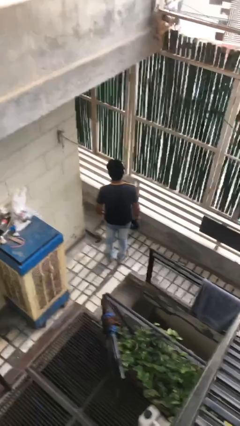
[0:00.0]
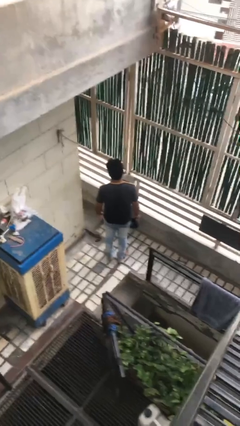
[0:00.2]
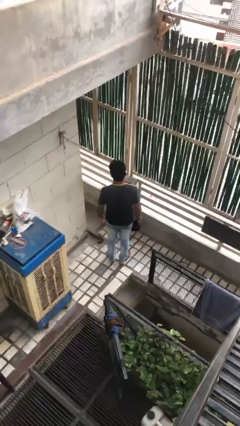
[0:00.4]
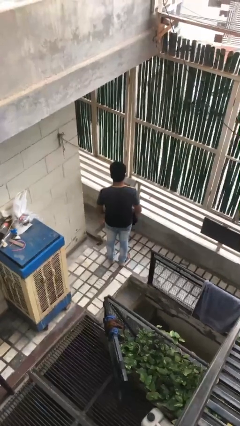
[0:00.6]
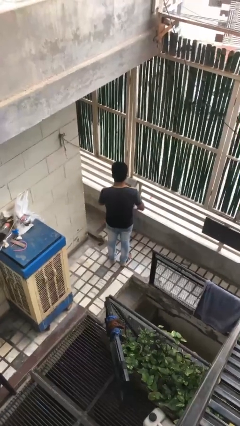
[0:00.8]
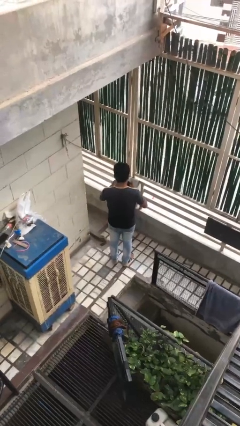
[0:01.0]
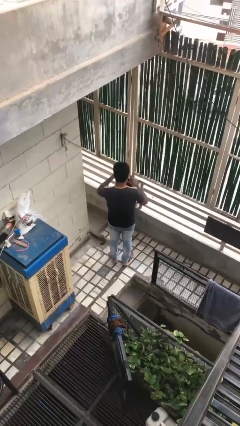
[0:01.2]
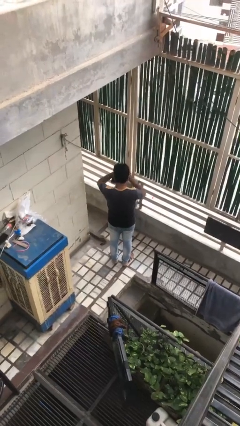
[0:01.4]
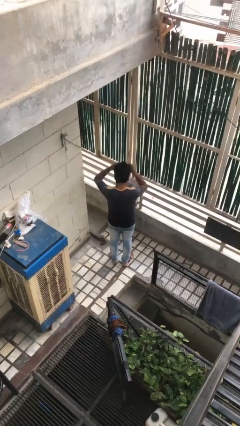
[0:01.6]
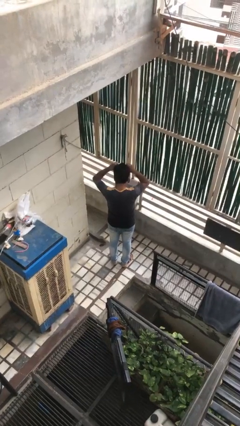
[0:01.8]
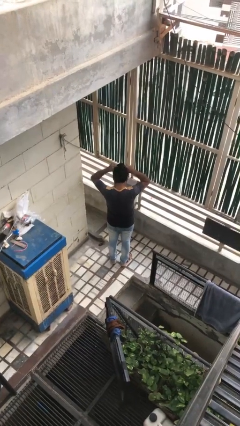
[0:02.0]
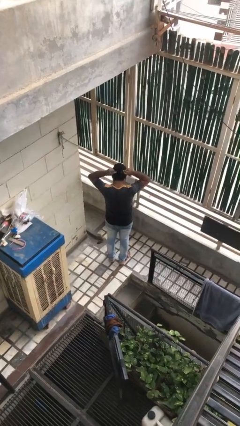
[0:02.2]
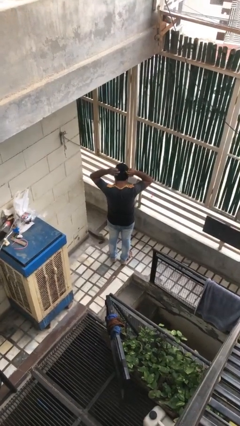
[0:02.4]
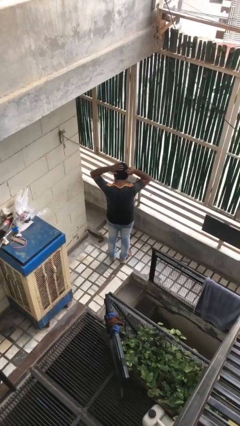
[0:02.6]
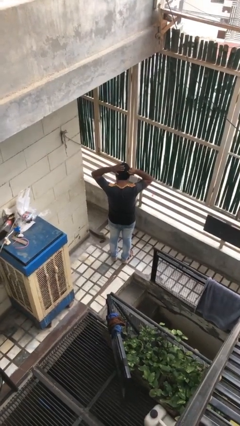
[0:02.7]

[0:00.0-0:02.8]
person puts on hat

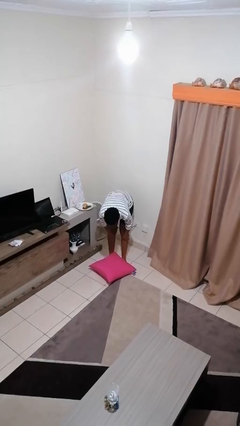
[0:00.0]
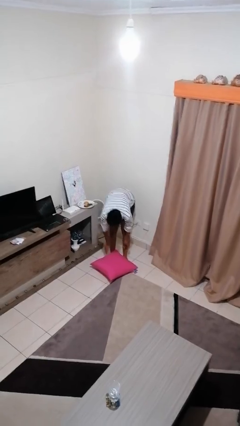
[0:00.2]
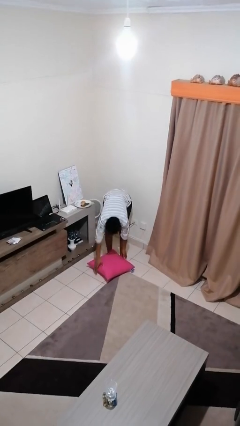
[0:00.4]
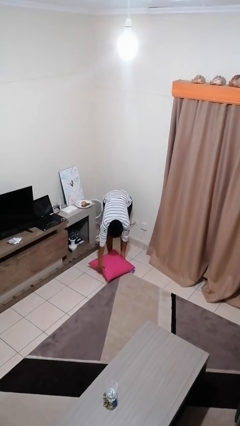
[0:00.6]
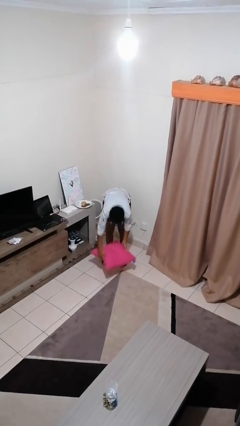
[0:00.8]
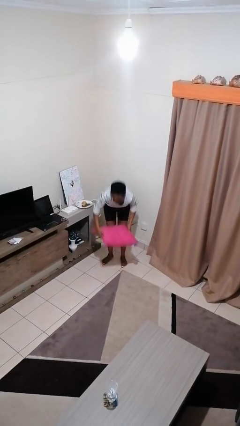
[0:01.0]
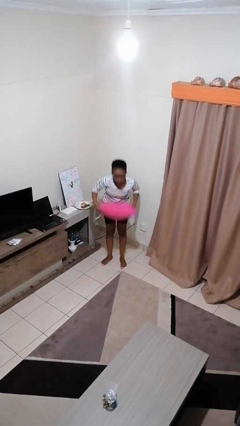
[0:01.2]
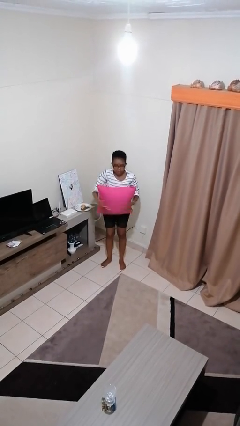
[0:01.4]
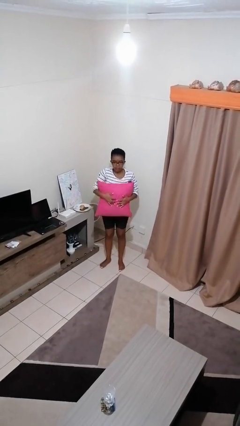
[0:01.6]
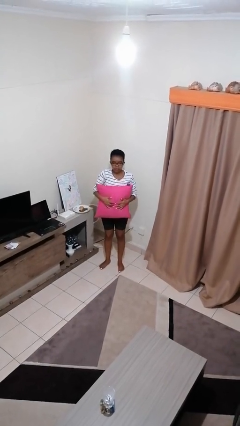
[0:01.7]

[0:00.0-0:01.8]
person picks up object from floor

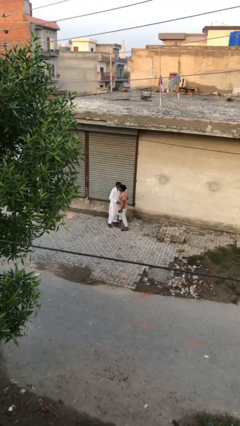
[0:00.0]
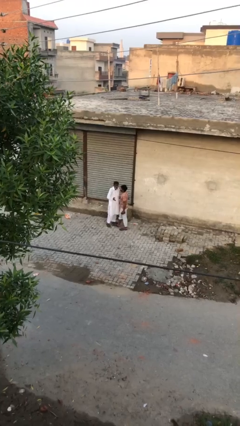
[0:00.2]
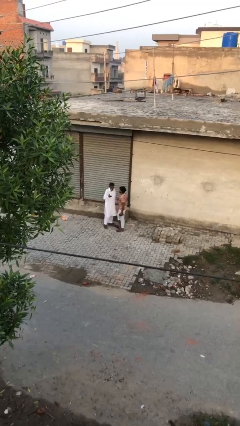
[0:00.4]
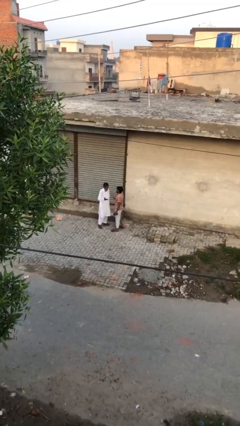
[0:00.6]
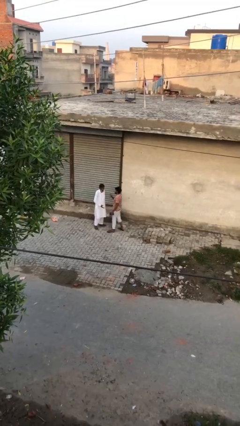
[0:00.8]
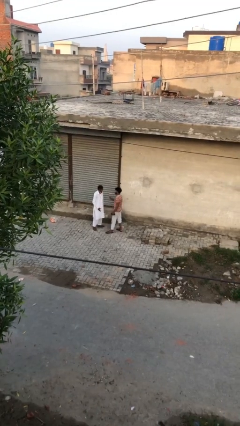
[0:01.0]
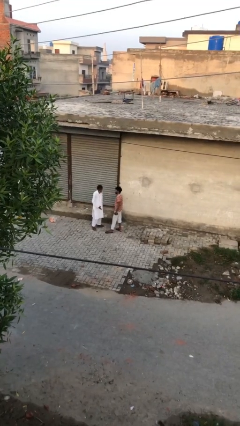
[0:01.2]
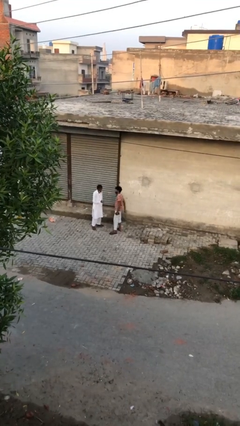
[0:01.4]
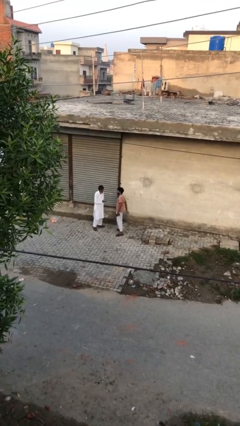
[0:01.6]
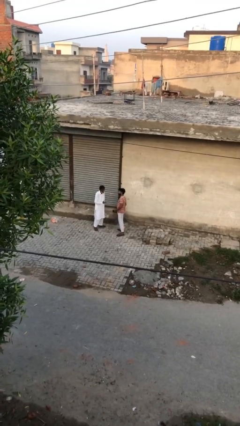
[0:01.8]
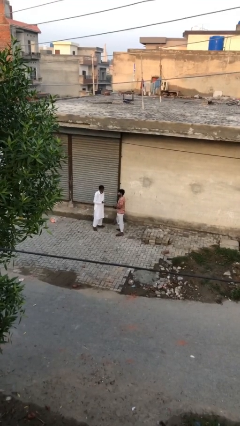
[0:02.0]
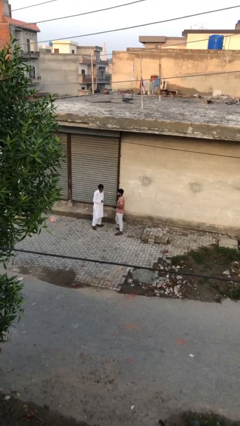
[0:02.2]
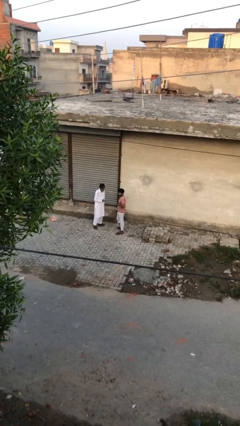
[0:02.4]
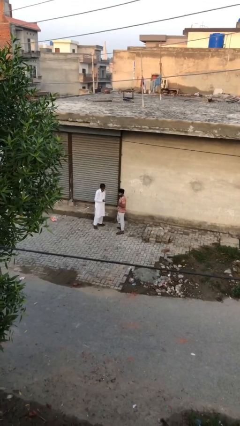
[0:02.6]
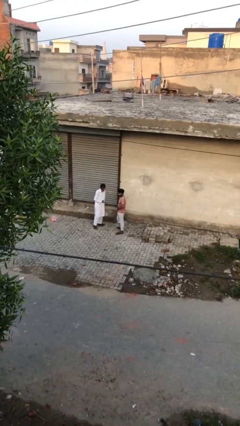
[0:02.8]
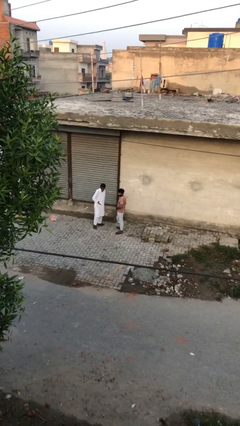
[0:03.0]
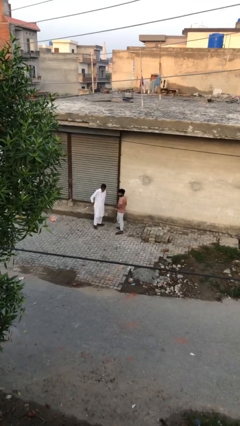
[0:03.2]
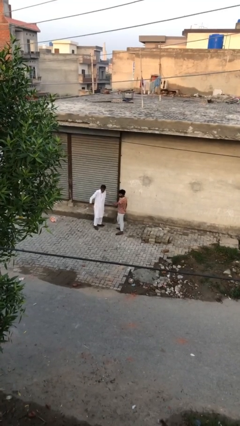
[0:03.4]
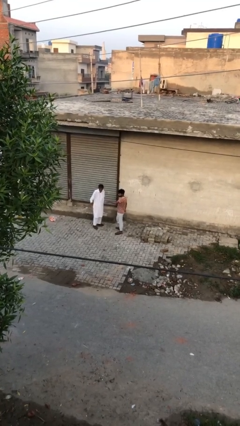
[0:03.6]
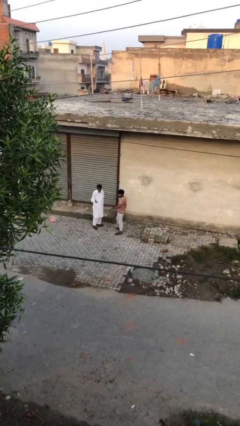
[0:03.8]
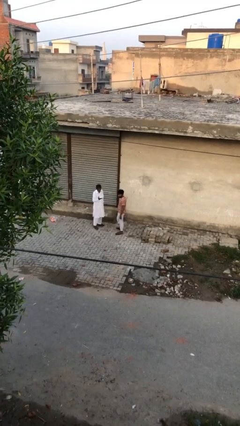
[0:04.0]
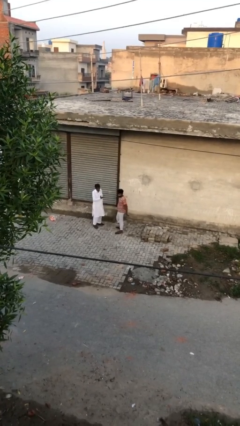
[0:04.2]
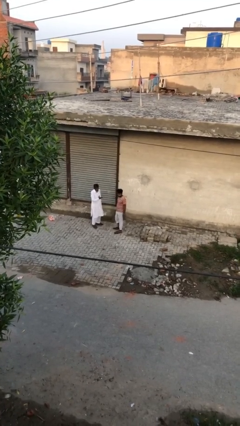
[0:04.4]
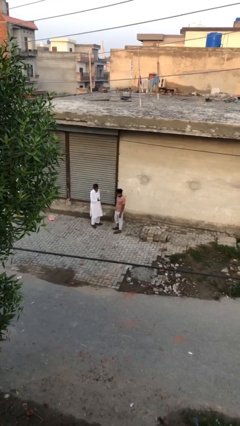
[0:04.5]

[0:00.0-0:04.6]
person talks to person

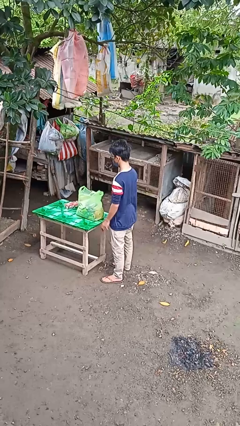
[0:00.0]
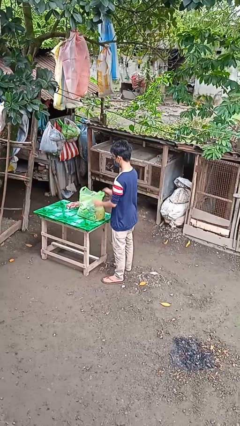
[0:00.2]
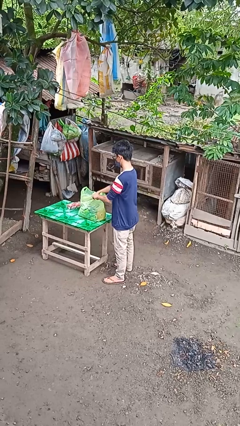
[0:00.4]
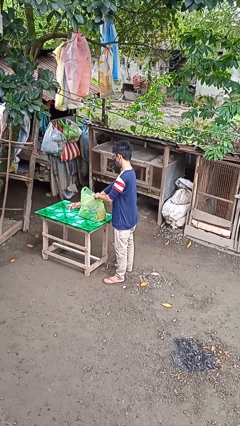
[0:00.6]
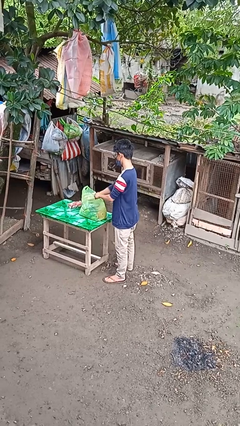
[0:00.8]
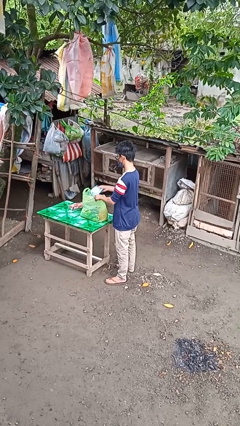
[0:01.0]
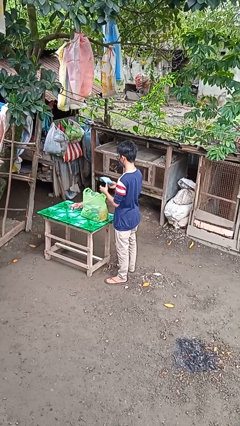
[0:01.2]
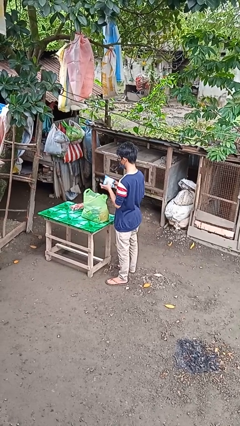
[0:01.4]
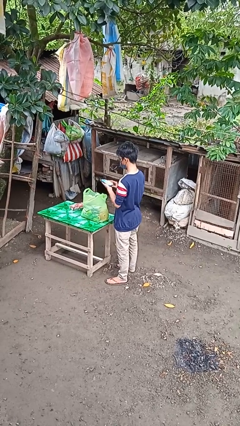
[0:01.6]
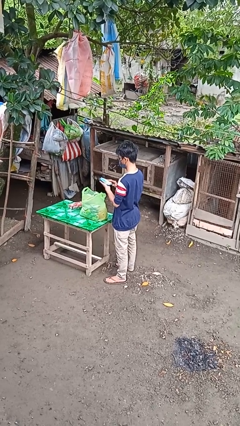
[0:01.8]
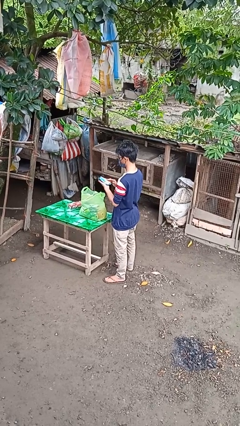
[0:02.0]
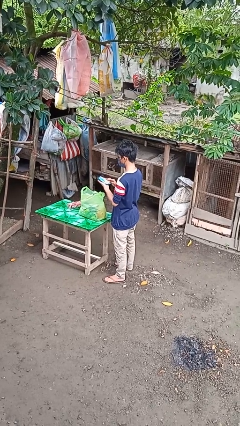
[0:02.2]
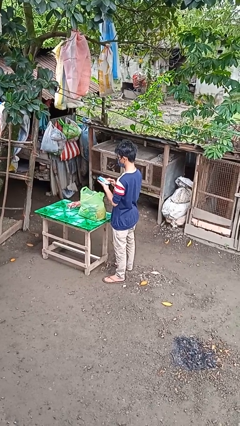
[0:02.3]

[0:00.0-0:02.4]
person takes object from bag

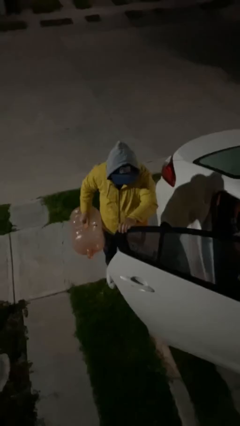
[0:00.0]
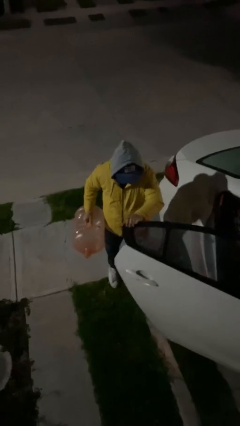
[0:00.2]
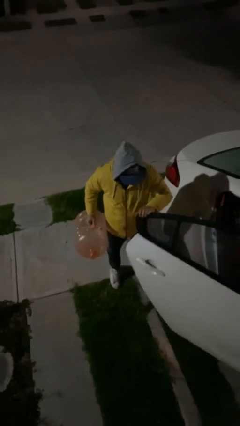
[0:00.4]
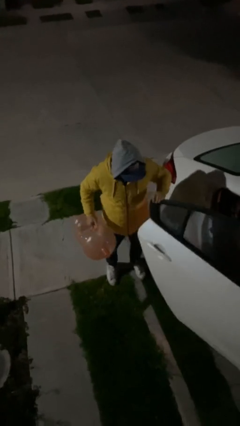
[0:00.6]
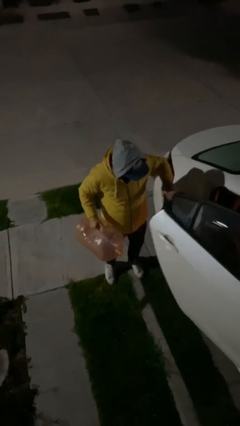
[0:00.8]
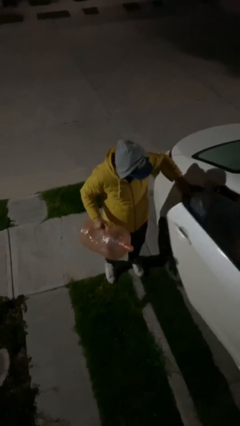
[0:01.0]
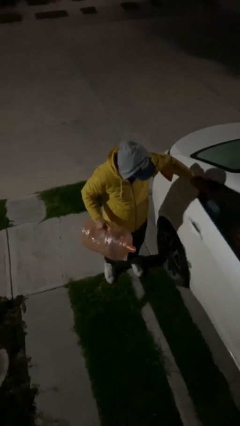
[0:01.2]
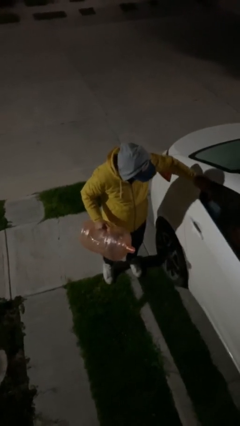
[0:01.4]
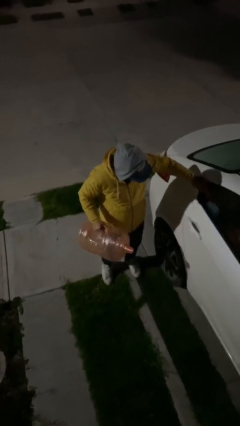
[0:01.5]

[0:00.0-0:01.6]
person closes car door

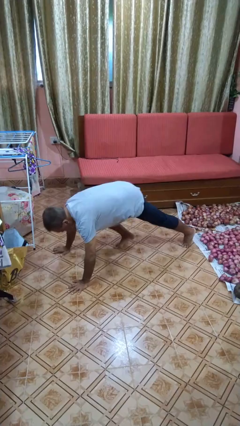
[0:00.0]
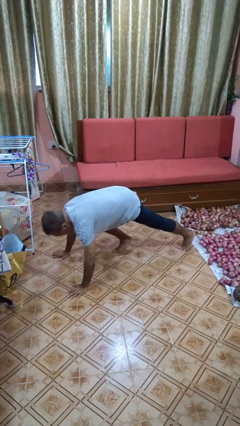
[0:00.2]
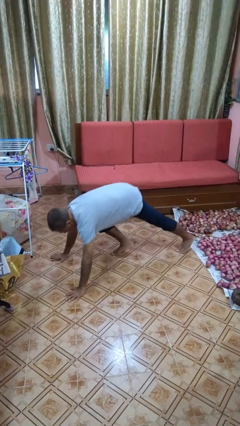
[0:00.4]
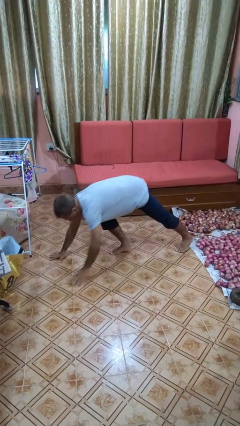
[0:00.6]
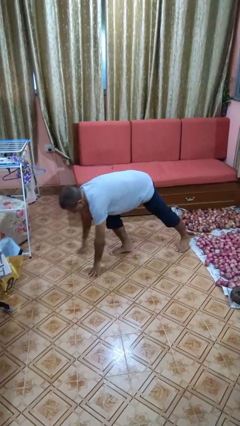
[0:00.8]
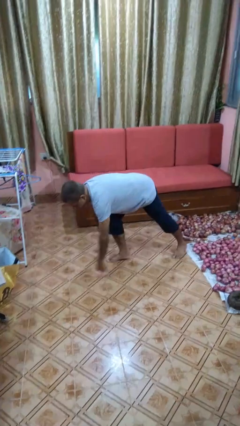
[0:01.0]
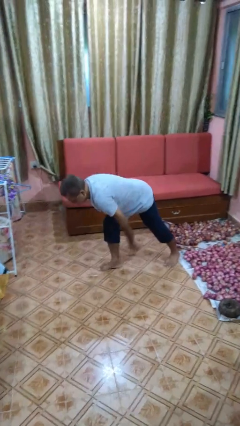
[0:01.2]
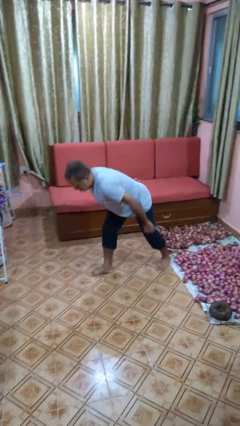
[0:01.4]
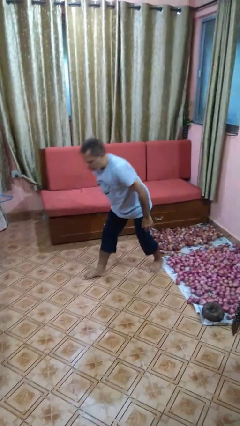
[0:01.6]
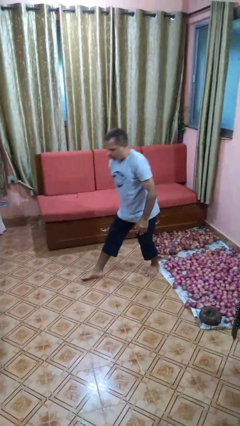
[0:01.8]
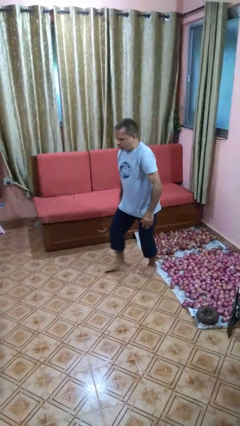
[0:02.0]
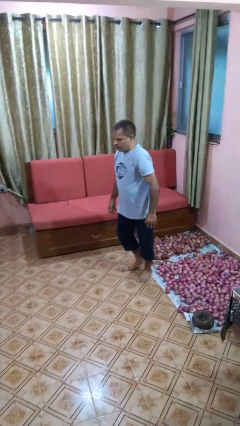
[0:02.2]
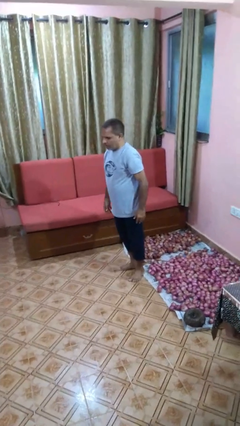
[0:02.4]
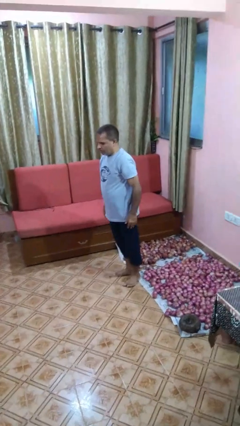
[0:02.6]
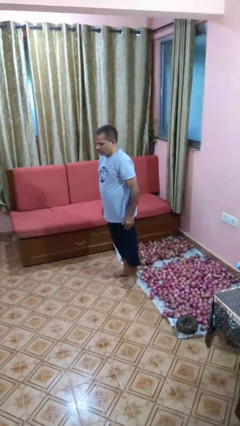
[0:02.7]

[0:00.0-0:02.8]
person stands up from floor

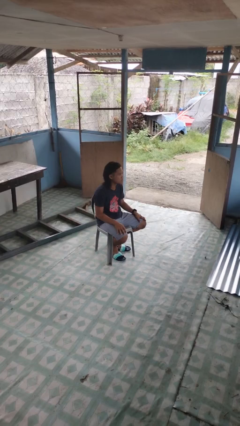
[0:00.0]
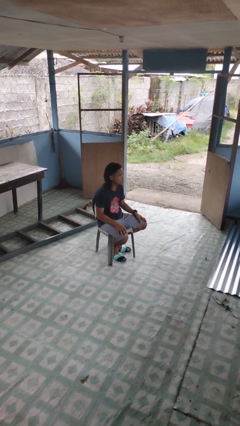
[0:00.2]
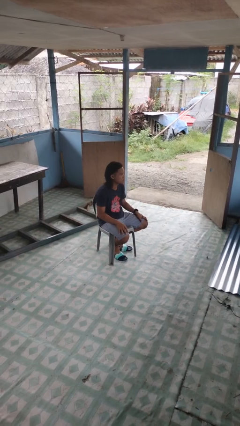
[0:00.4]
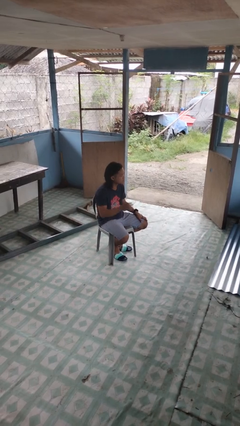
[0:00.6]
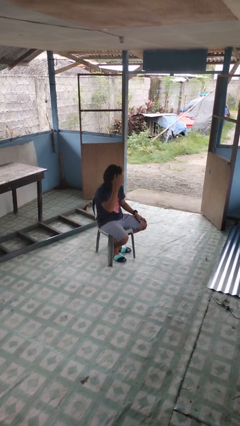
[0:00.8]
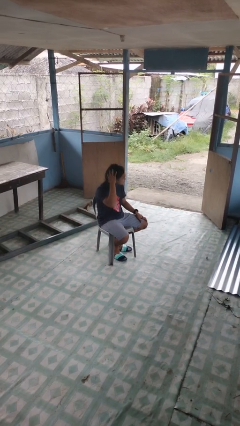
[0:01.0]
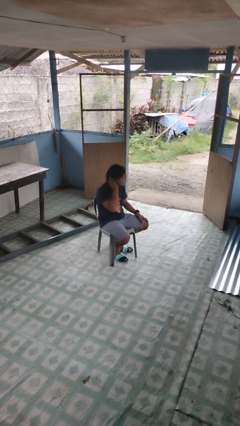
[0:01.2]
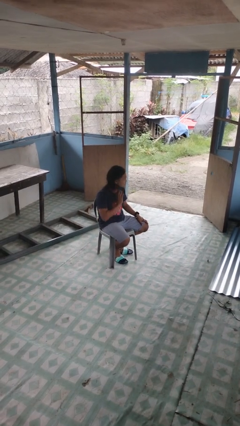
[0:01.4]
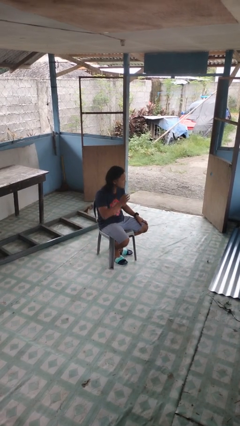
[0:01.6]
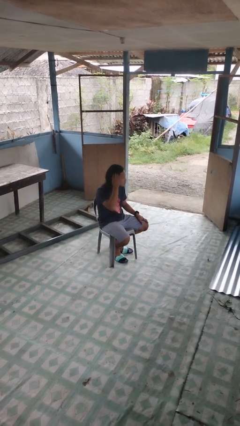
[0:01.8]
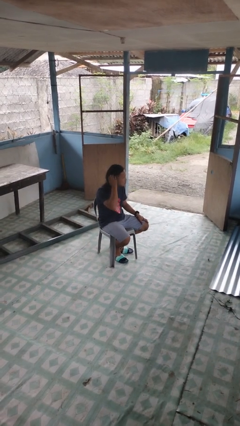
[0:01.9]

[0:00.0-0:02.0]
person strokes hair
